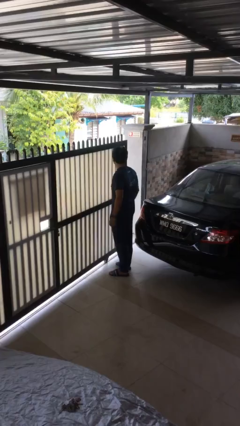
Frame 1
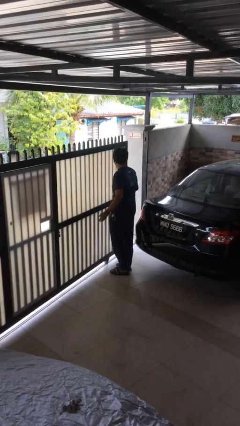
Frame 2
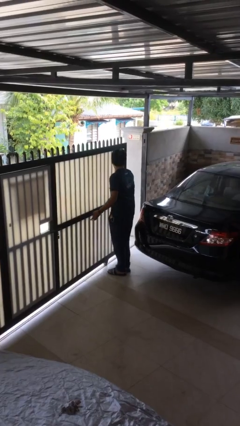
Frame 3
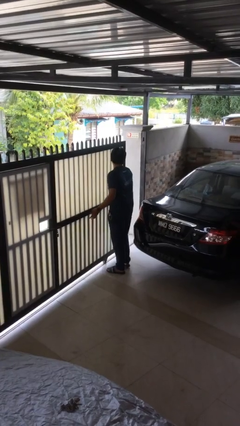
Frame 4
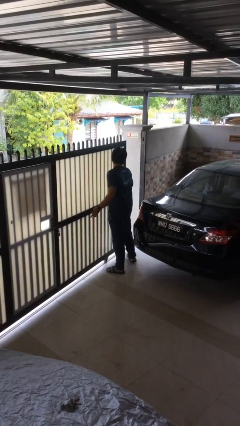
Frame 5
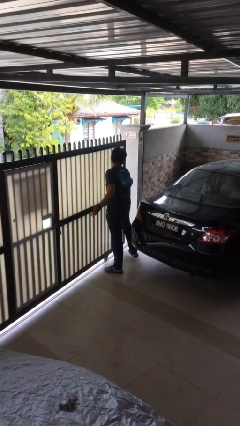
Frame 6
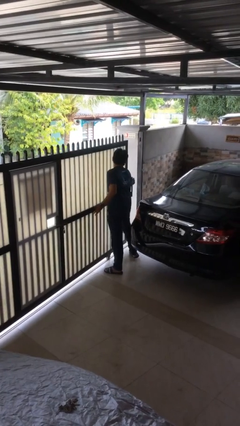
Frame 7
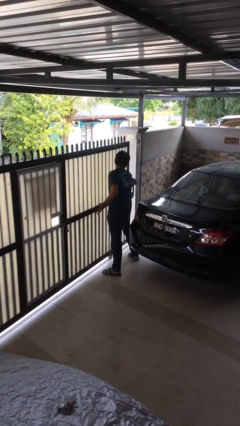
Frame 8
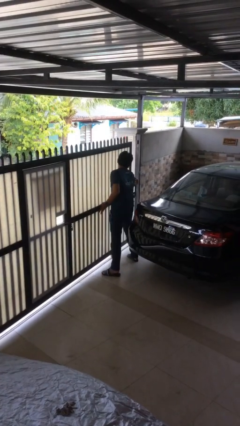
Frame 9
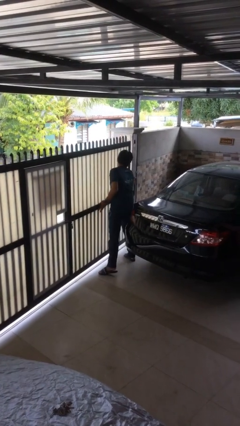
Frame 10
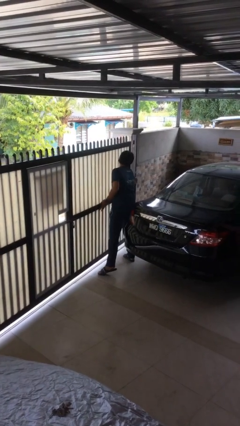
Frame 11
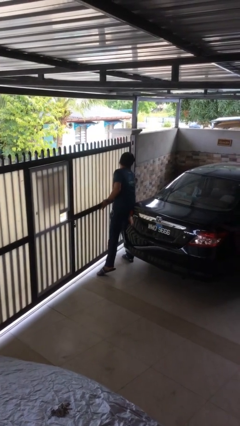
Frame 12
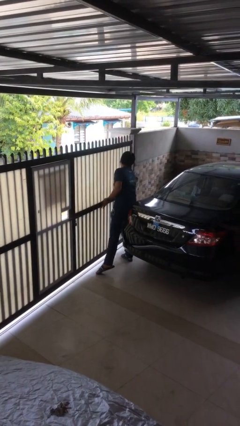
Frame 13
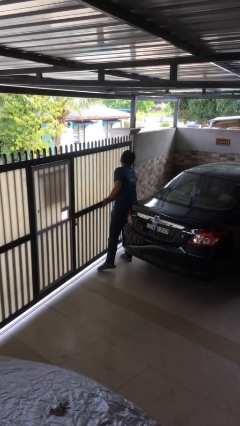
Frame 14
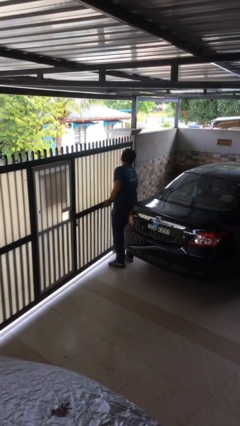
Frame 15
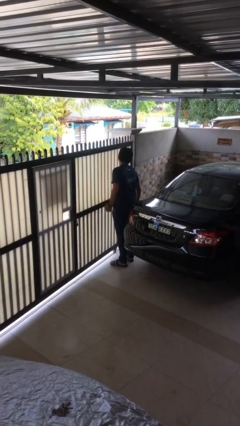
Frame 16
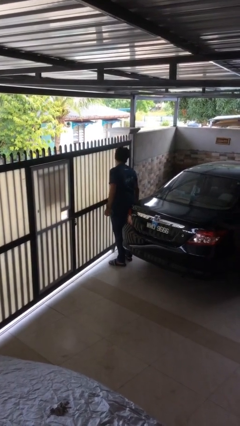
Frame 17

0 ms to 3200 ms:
person closes sliding door

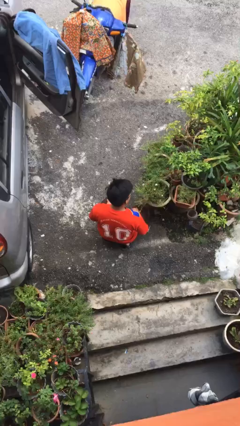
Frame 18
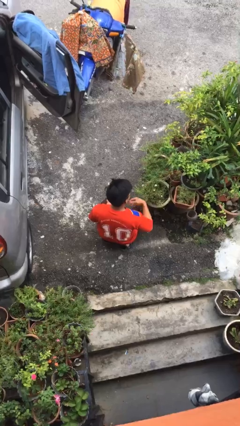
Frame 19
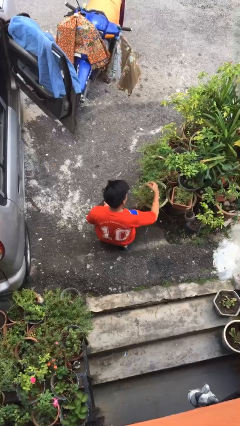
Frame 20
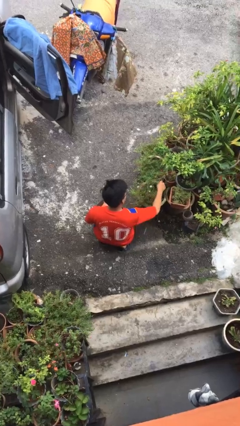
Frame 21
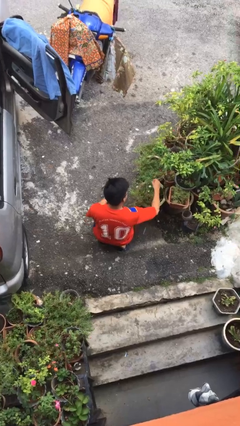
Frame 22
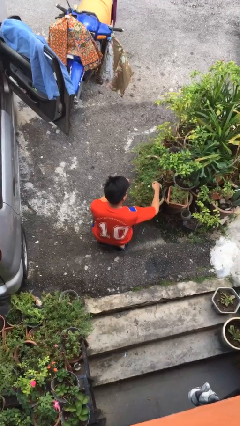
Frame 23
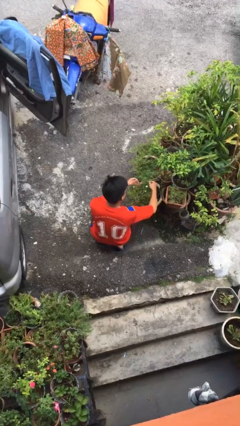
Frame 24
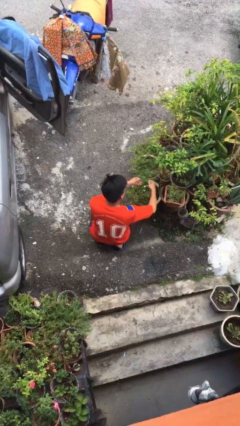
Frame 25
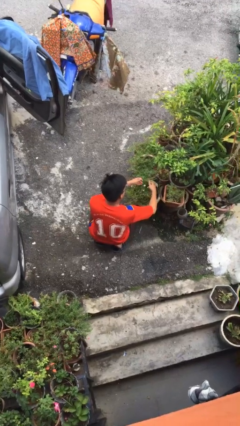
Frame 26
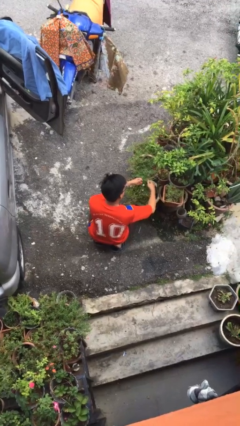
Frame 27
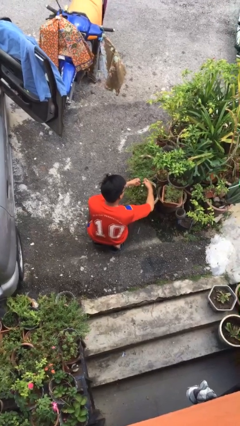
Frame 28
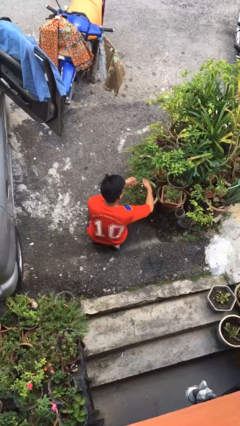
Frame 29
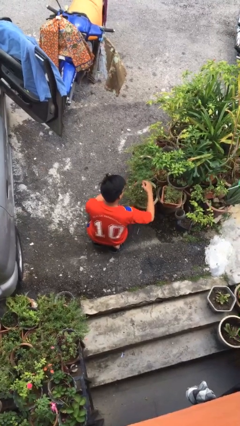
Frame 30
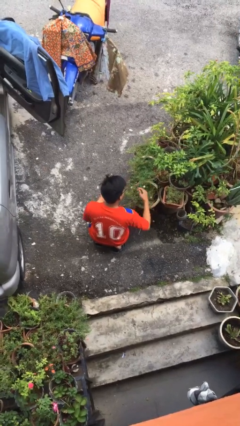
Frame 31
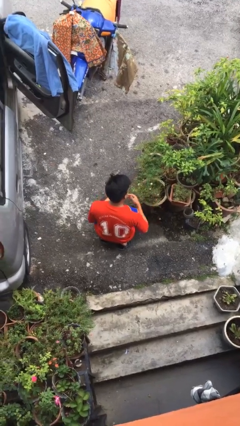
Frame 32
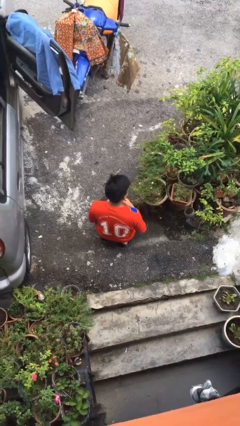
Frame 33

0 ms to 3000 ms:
person arranges flowers in vase

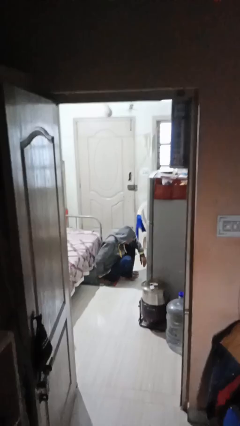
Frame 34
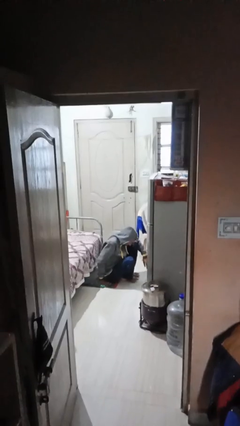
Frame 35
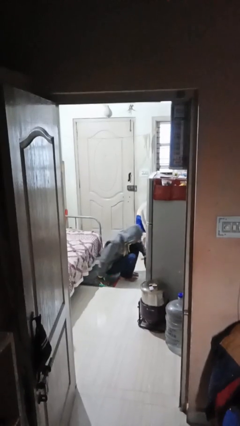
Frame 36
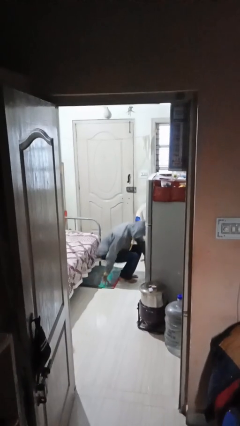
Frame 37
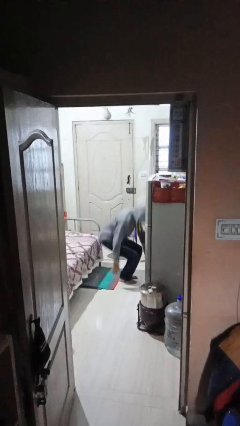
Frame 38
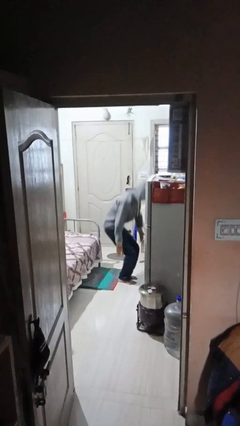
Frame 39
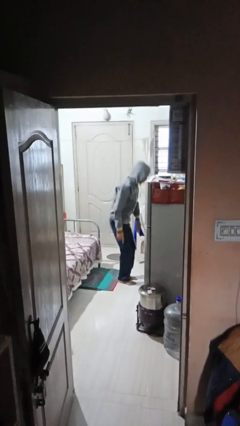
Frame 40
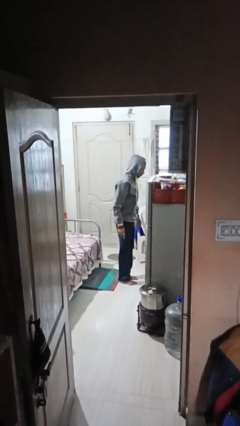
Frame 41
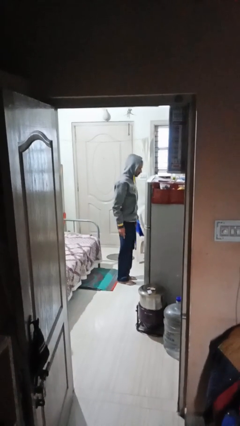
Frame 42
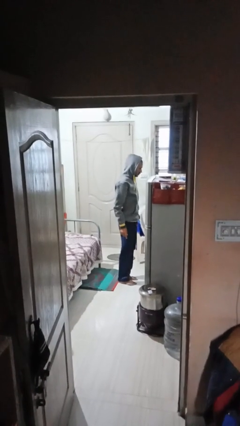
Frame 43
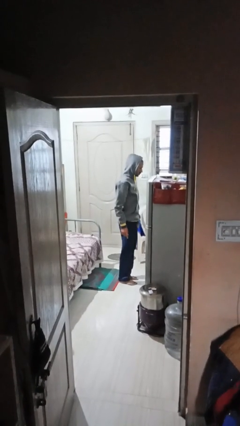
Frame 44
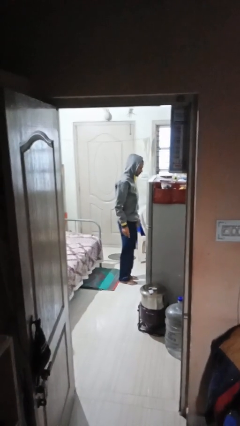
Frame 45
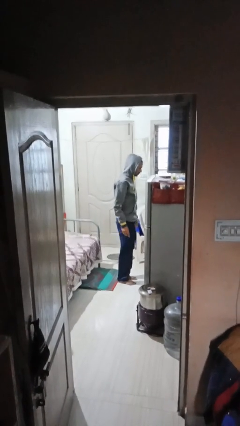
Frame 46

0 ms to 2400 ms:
person stands up

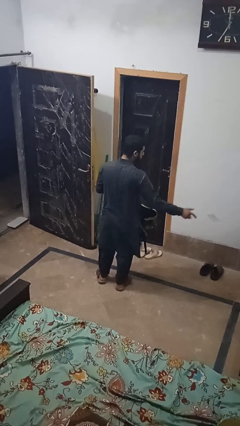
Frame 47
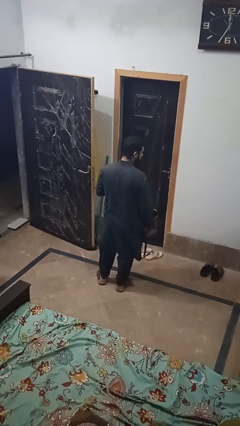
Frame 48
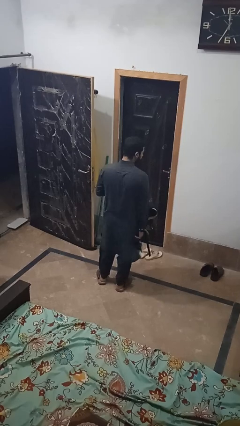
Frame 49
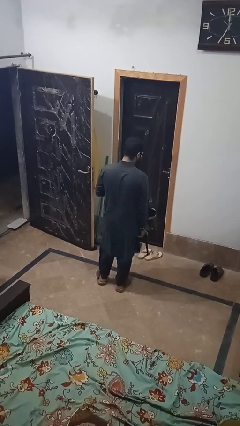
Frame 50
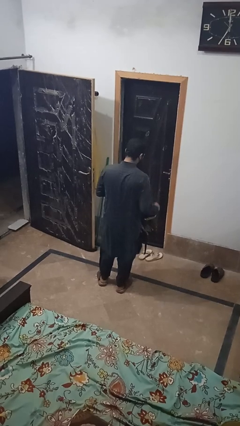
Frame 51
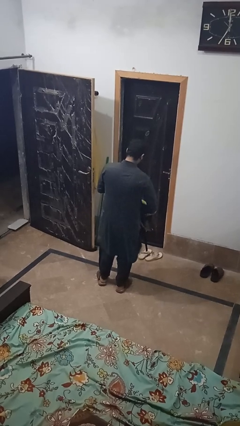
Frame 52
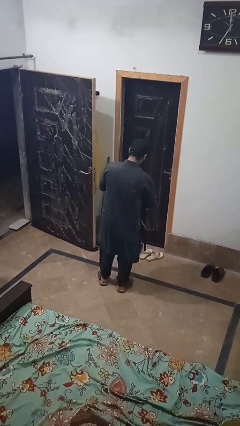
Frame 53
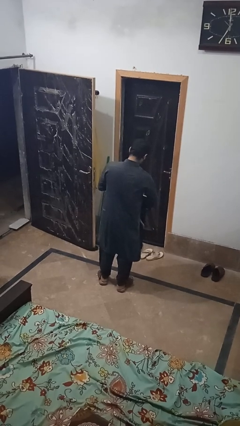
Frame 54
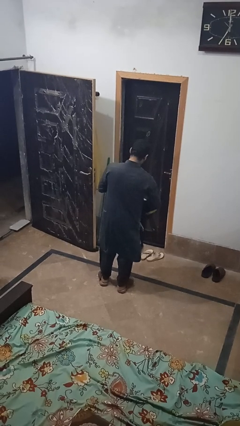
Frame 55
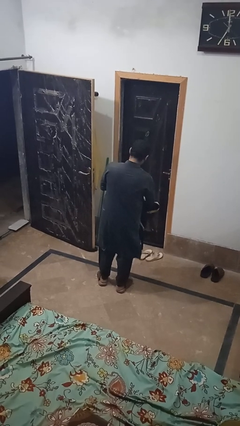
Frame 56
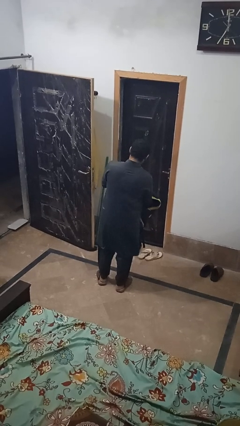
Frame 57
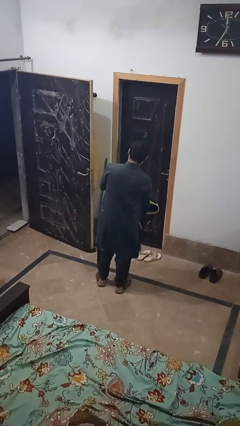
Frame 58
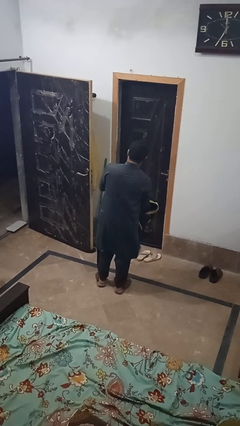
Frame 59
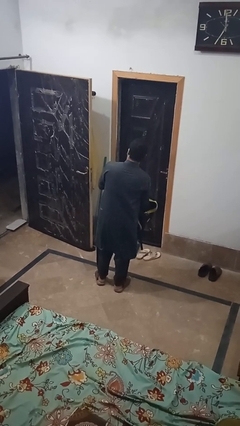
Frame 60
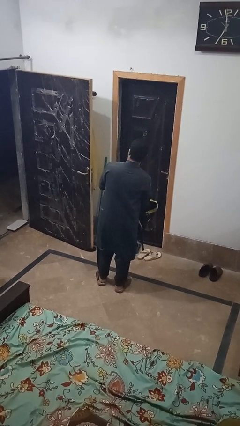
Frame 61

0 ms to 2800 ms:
person searches in bag

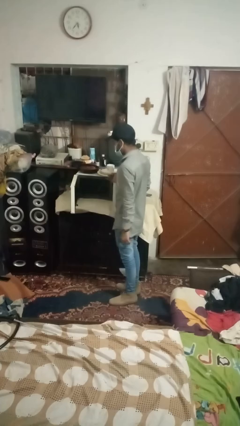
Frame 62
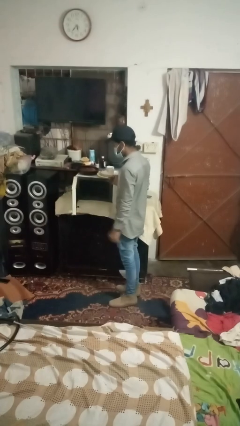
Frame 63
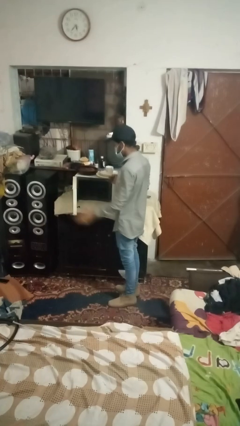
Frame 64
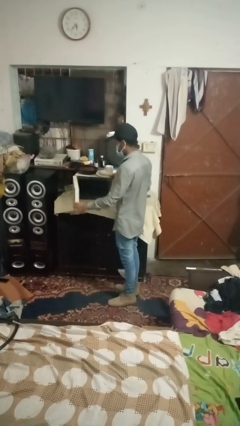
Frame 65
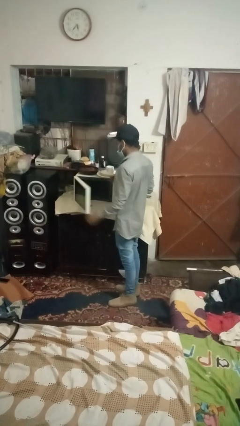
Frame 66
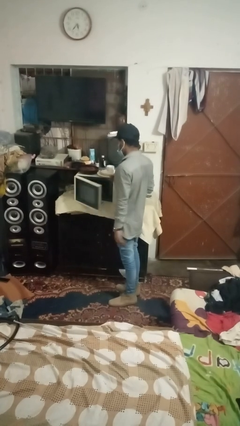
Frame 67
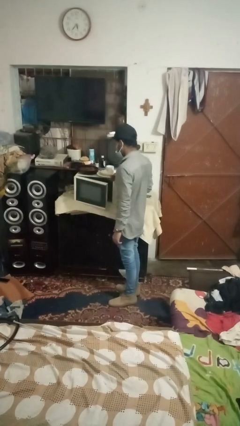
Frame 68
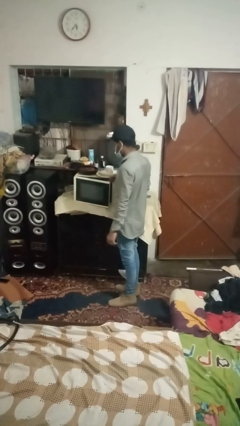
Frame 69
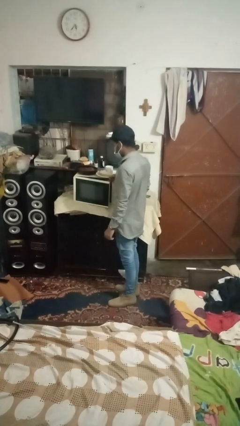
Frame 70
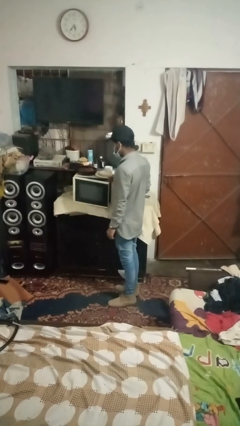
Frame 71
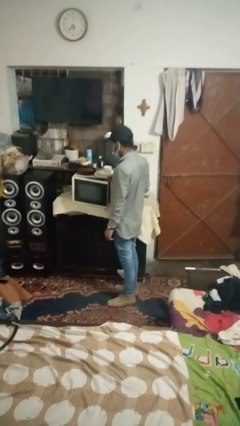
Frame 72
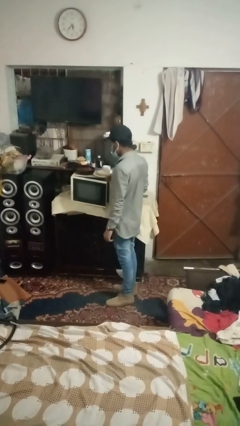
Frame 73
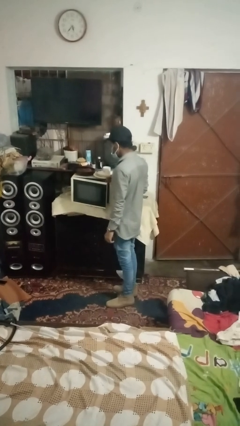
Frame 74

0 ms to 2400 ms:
person closes dishwasher

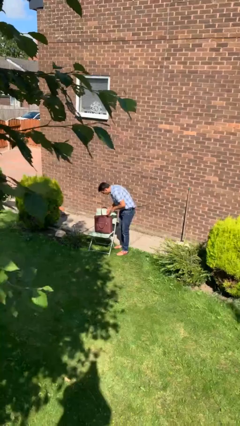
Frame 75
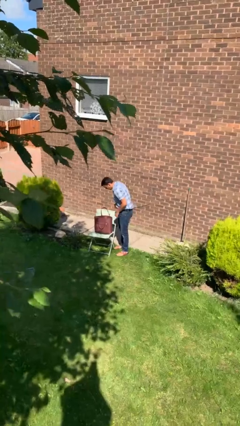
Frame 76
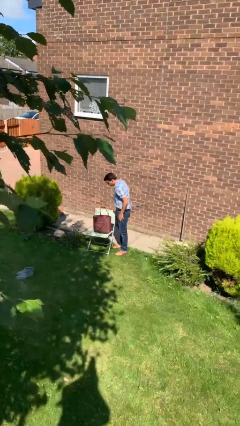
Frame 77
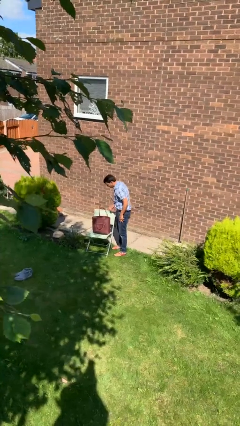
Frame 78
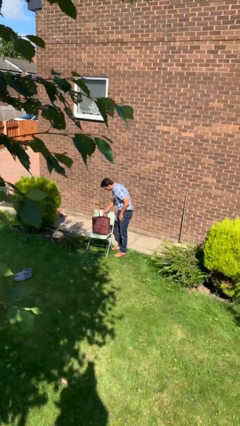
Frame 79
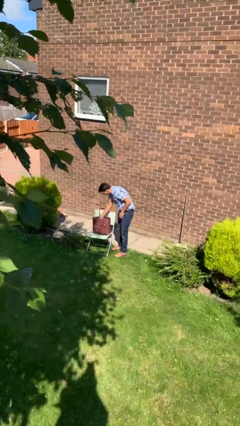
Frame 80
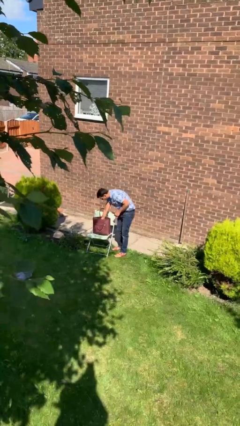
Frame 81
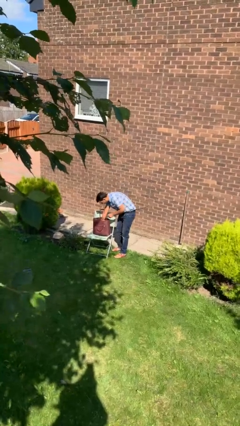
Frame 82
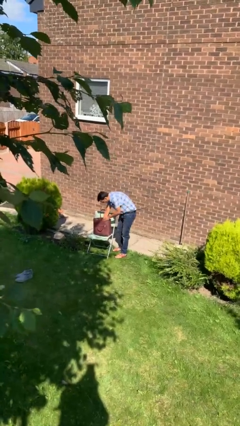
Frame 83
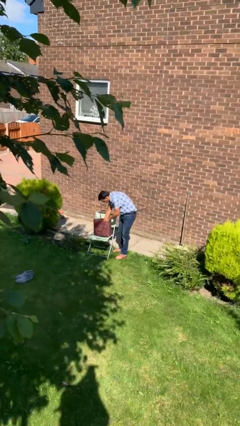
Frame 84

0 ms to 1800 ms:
person searches in purse

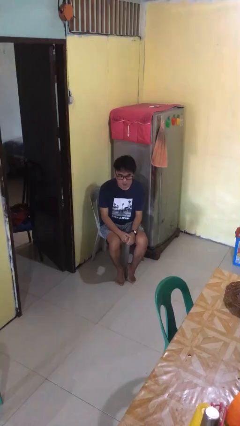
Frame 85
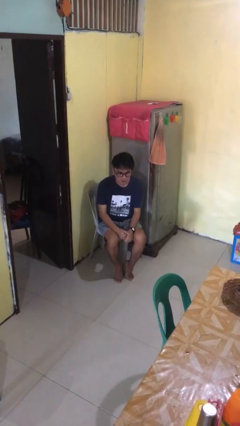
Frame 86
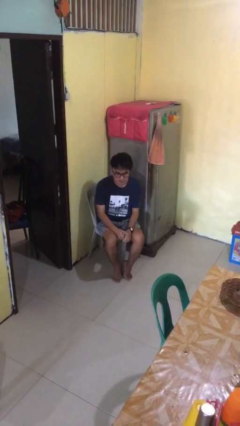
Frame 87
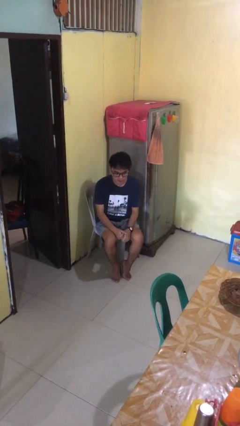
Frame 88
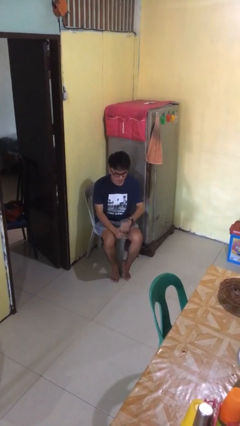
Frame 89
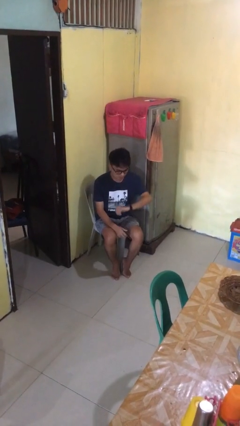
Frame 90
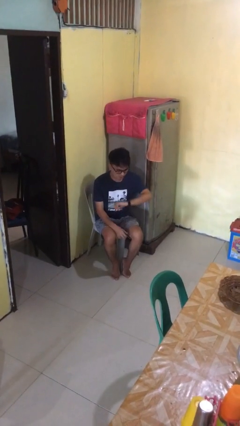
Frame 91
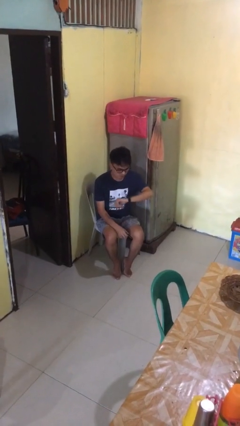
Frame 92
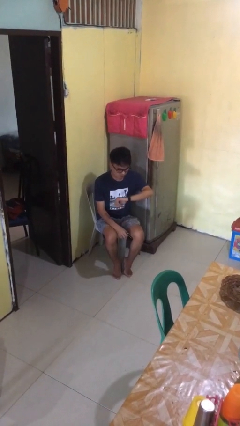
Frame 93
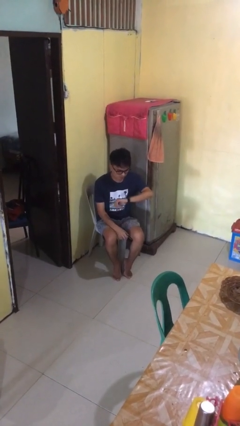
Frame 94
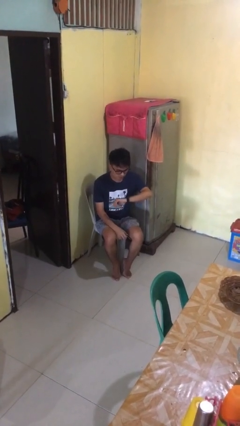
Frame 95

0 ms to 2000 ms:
person looks at wristwatch
